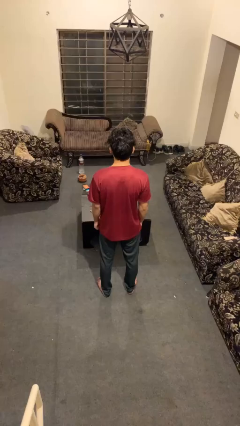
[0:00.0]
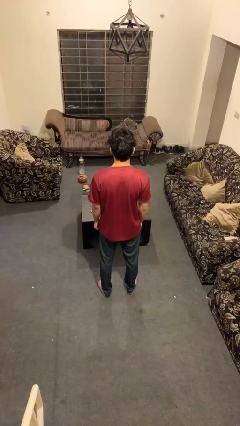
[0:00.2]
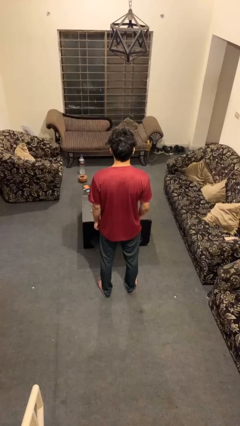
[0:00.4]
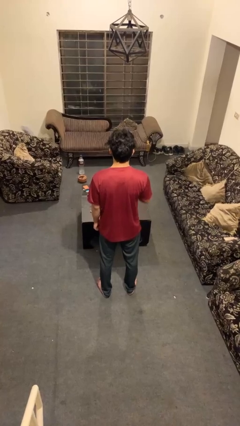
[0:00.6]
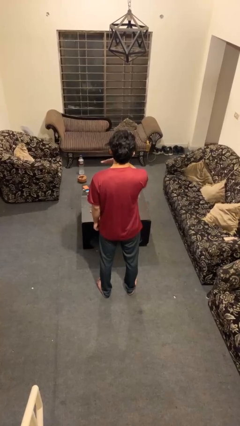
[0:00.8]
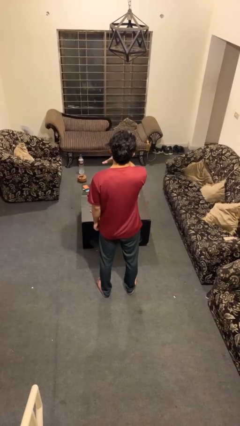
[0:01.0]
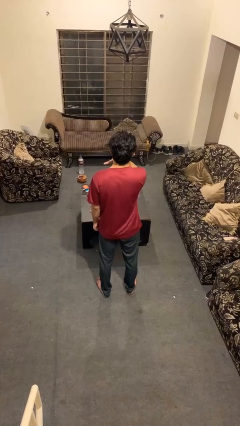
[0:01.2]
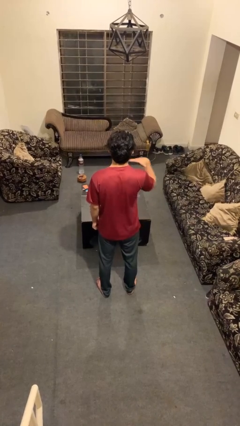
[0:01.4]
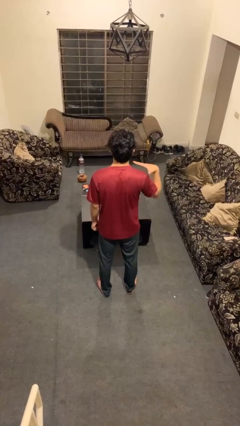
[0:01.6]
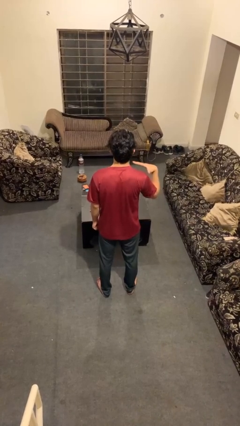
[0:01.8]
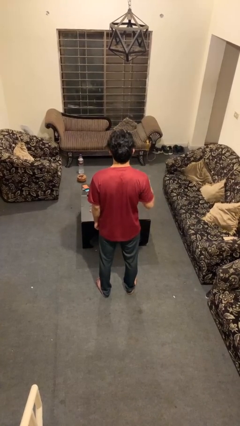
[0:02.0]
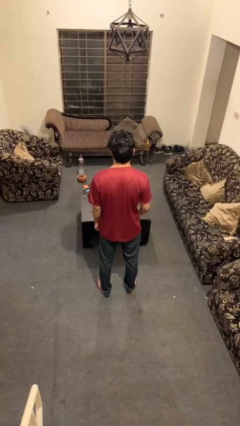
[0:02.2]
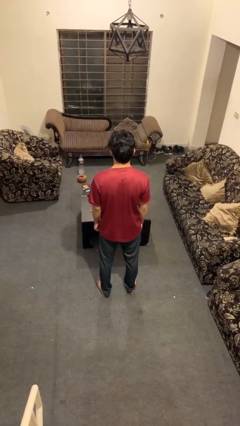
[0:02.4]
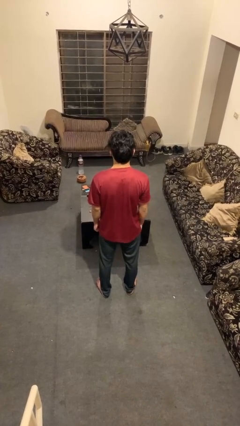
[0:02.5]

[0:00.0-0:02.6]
person gestures cut

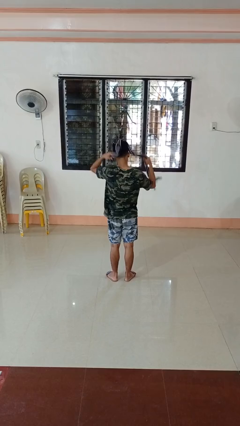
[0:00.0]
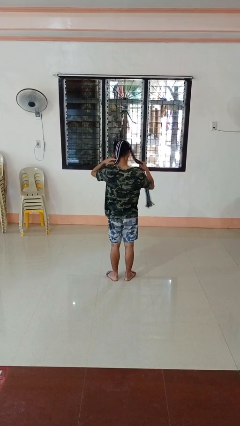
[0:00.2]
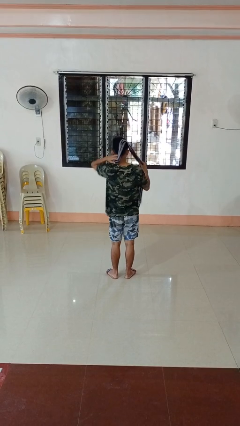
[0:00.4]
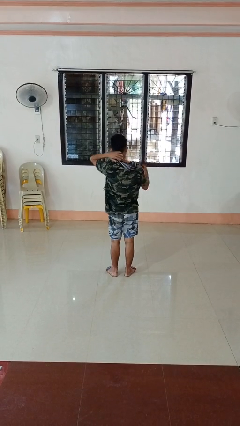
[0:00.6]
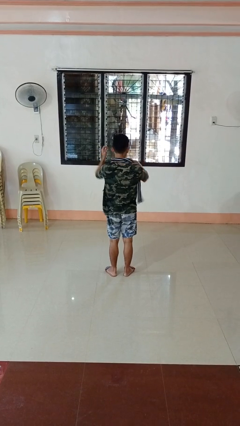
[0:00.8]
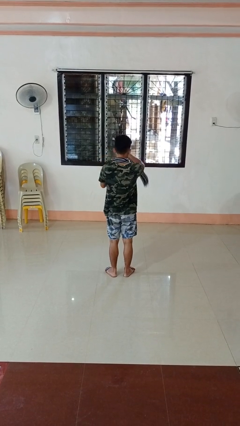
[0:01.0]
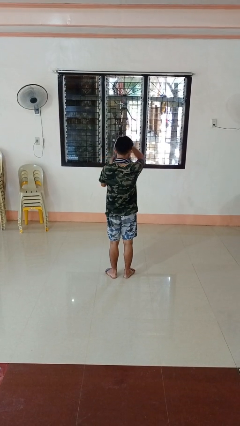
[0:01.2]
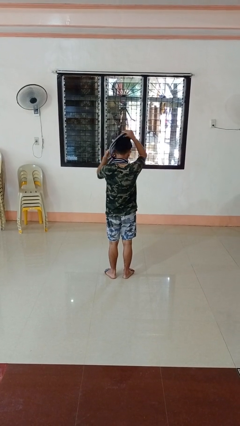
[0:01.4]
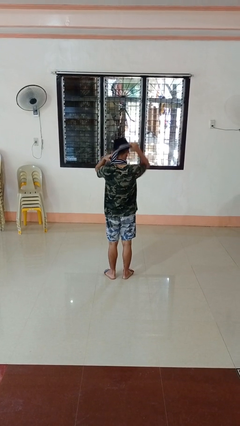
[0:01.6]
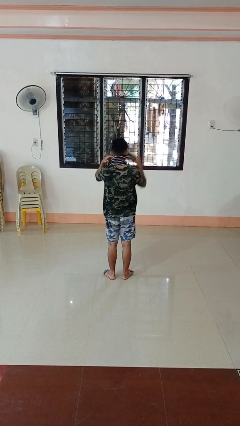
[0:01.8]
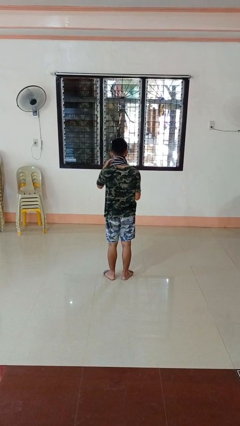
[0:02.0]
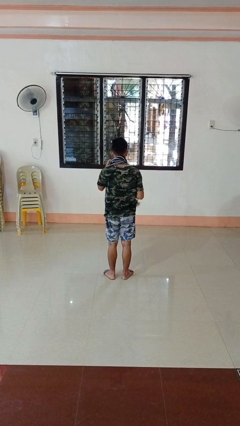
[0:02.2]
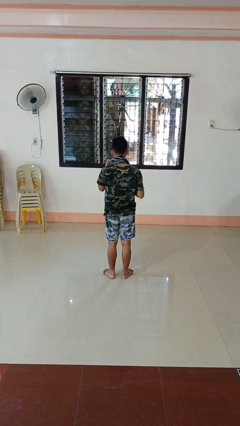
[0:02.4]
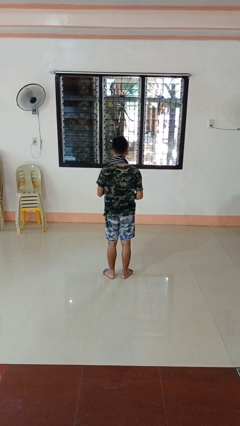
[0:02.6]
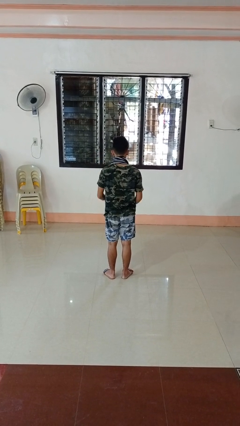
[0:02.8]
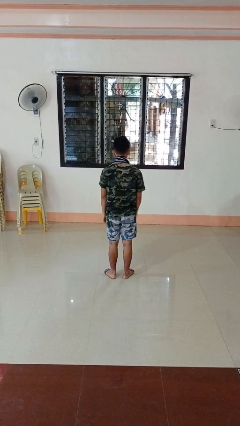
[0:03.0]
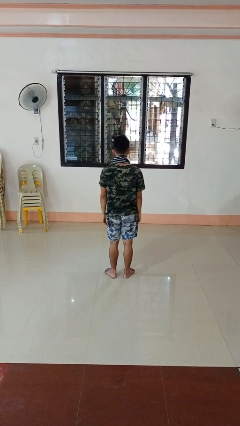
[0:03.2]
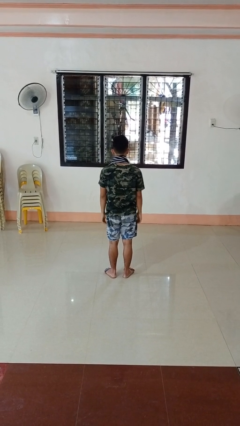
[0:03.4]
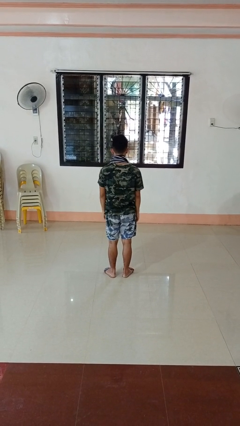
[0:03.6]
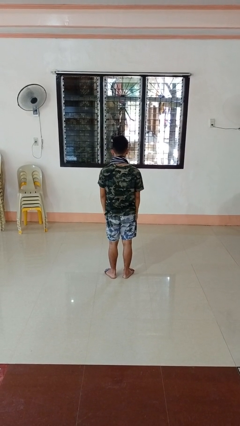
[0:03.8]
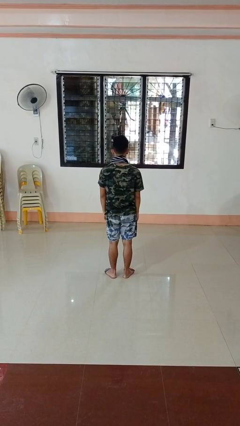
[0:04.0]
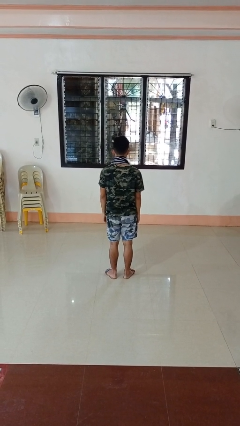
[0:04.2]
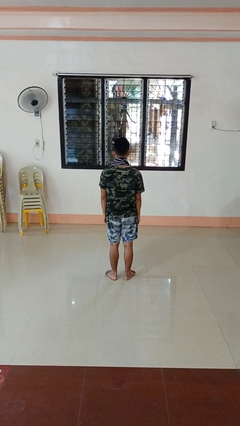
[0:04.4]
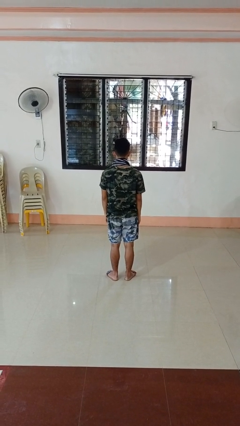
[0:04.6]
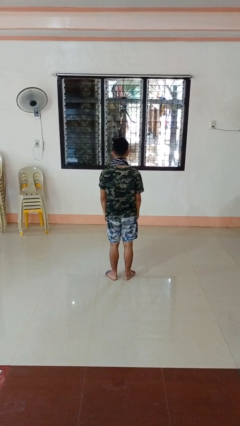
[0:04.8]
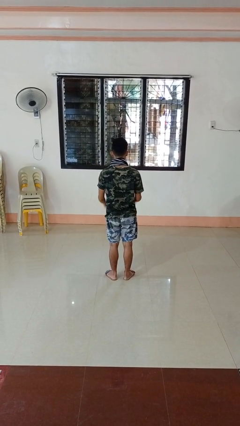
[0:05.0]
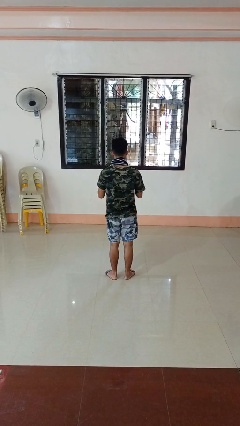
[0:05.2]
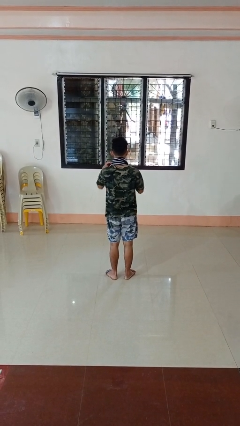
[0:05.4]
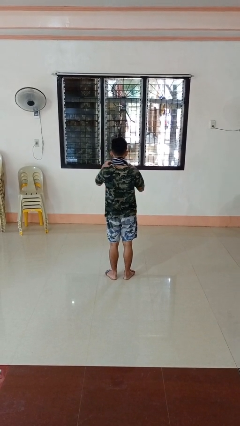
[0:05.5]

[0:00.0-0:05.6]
person puts on scarf

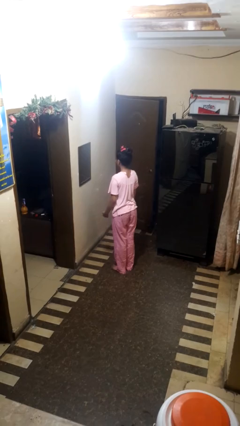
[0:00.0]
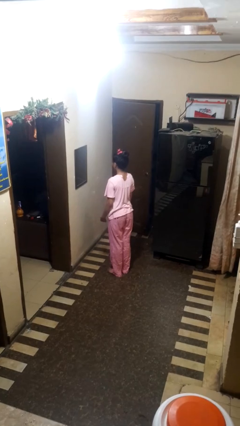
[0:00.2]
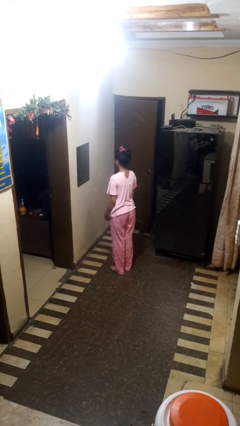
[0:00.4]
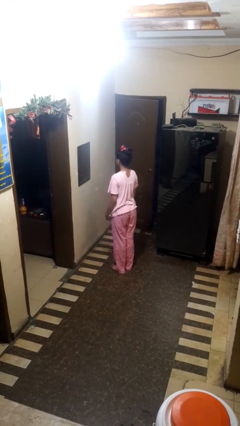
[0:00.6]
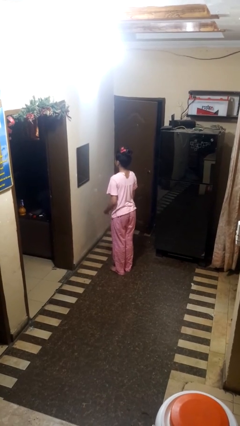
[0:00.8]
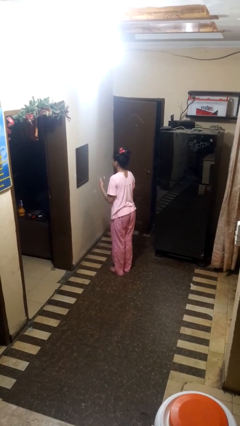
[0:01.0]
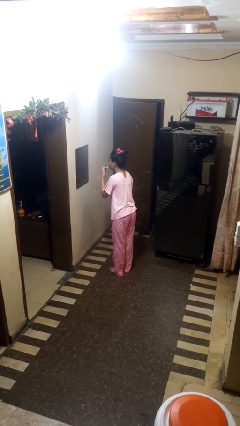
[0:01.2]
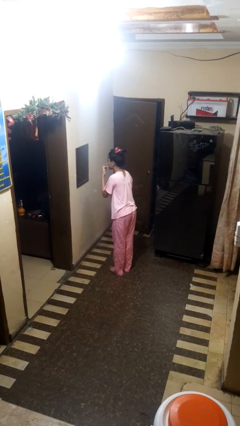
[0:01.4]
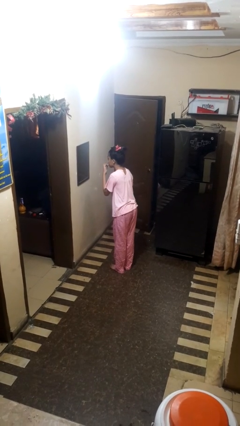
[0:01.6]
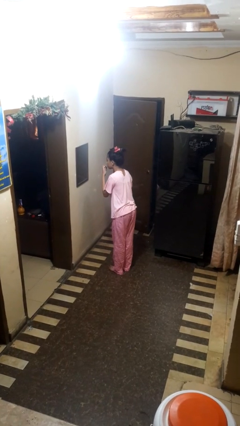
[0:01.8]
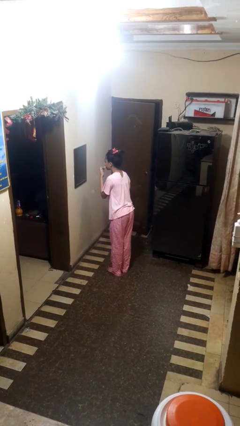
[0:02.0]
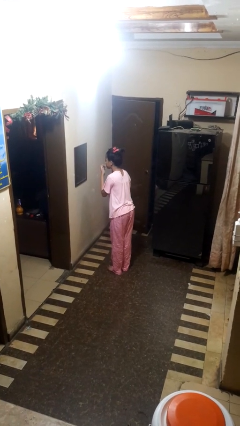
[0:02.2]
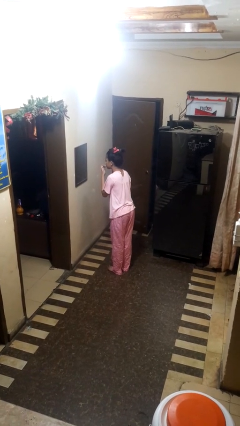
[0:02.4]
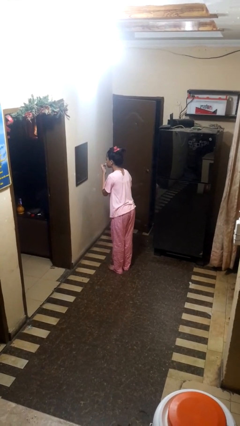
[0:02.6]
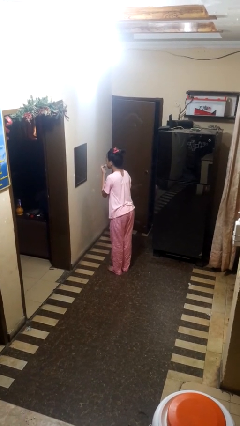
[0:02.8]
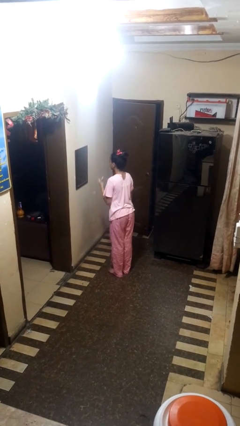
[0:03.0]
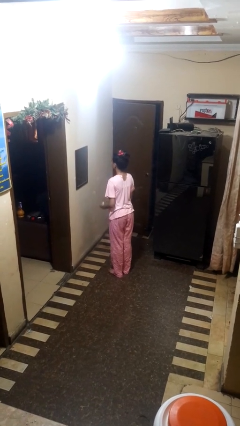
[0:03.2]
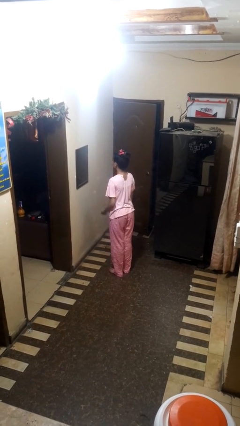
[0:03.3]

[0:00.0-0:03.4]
person applies lip makeup

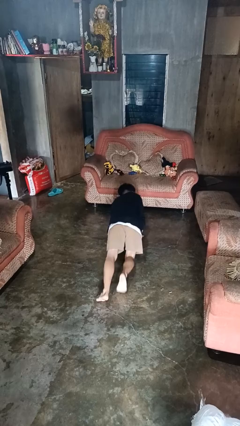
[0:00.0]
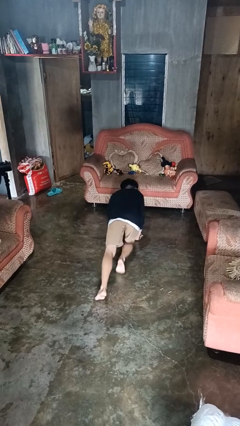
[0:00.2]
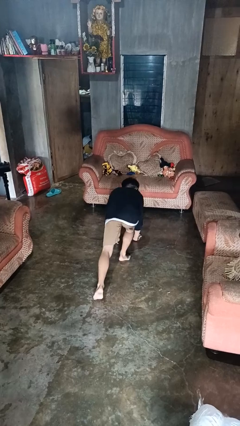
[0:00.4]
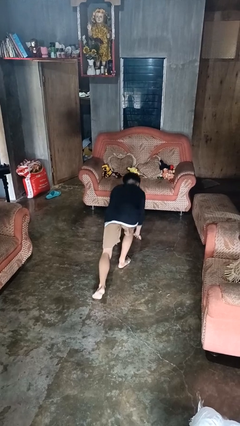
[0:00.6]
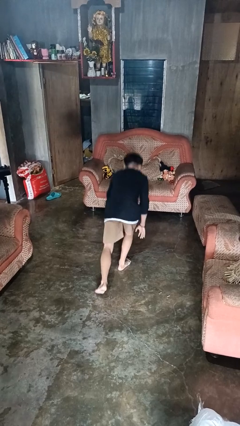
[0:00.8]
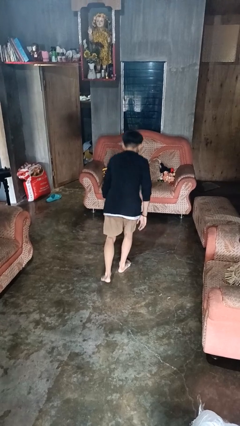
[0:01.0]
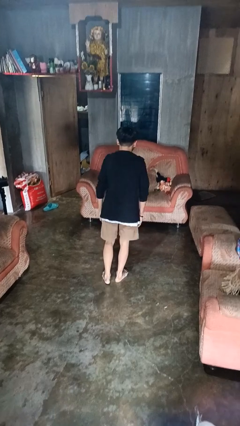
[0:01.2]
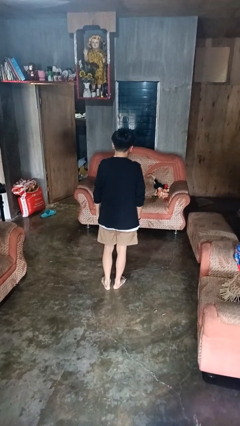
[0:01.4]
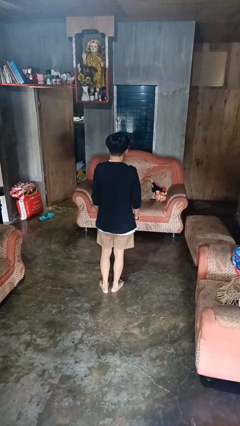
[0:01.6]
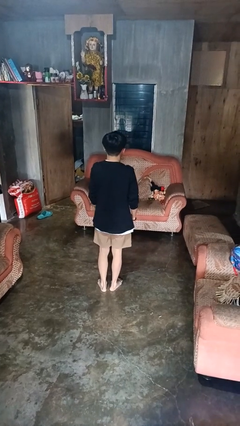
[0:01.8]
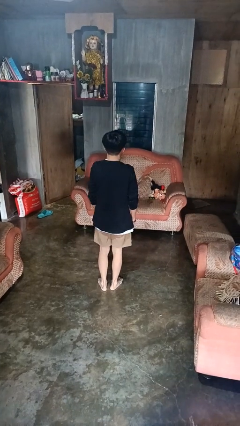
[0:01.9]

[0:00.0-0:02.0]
person stands up from floor

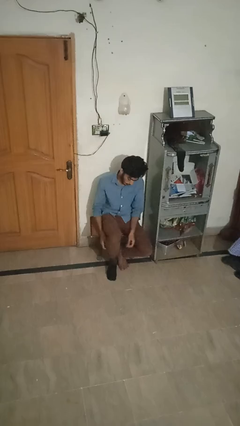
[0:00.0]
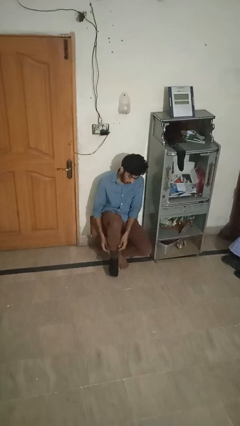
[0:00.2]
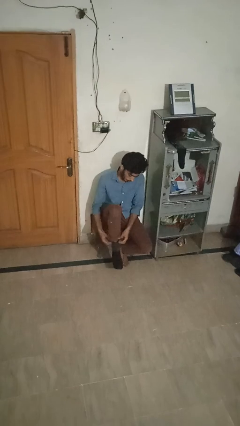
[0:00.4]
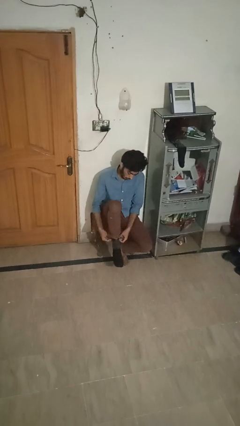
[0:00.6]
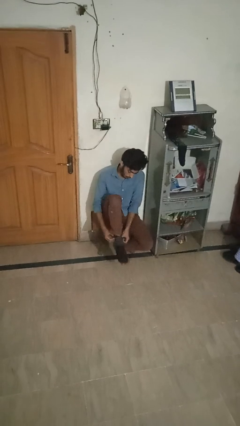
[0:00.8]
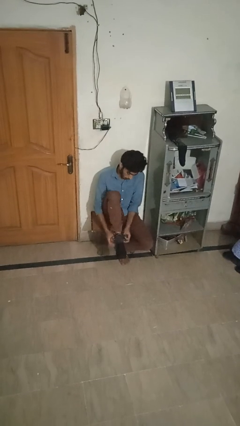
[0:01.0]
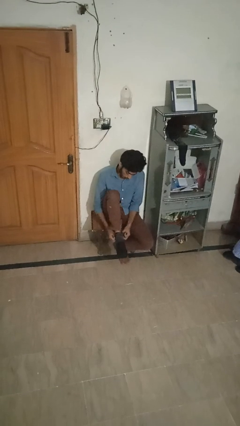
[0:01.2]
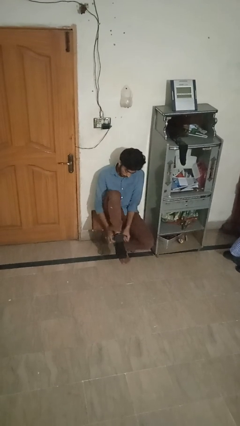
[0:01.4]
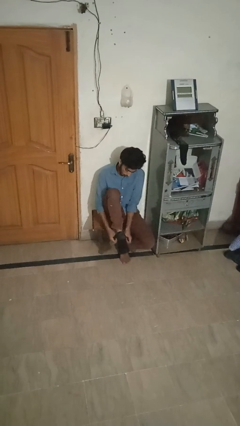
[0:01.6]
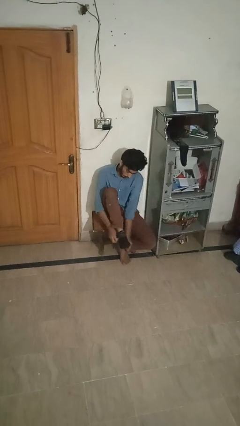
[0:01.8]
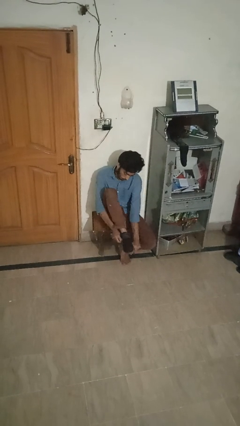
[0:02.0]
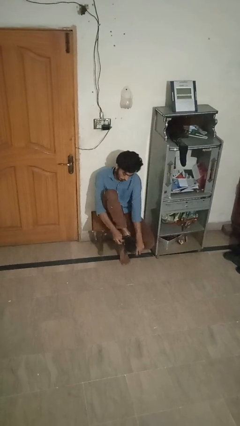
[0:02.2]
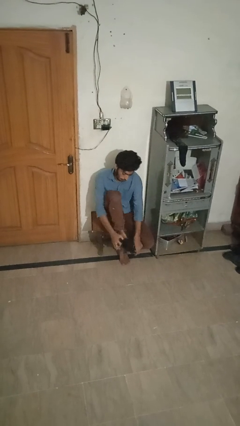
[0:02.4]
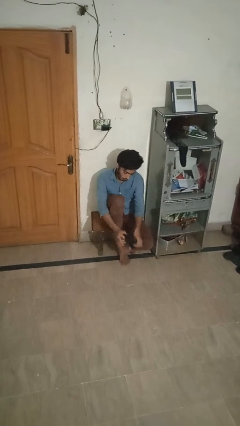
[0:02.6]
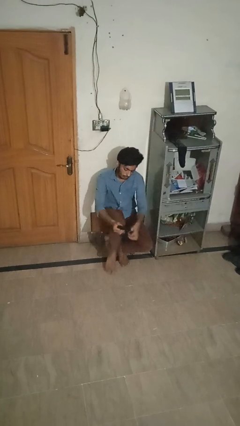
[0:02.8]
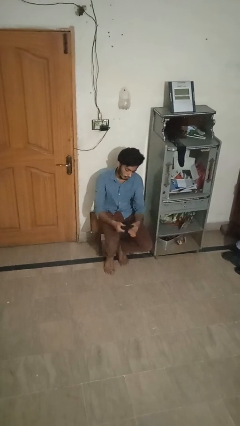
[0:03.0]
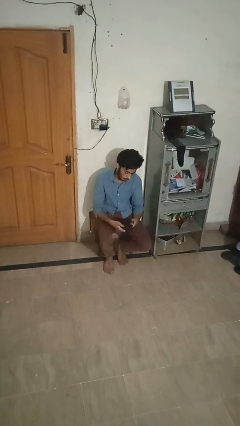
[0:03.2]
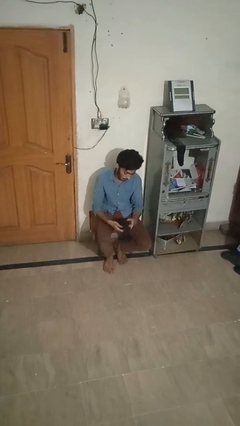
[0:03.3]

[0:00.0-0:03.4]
person takes off socks

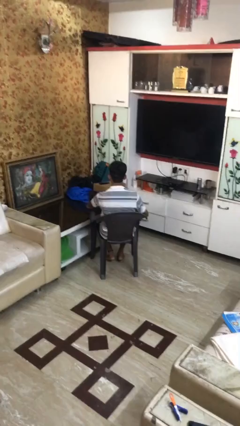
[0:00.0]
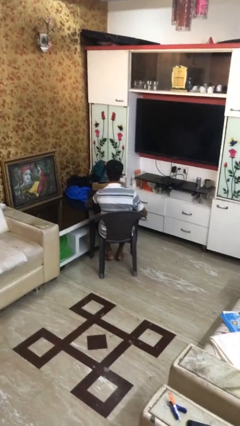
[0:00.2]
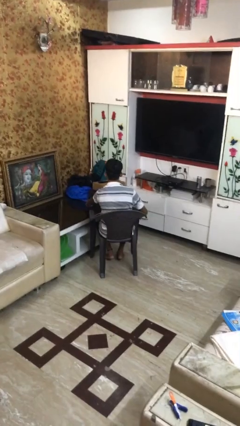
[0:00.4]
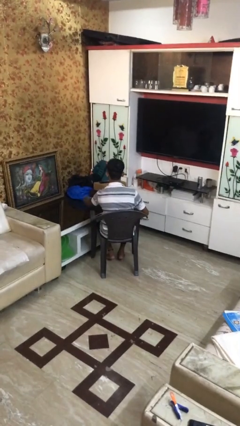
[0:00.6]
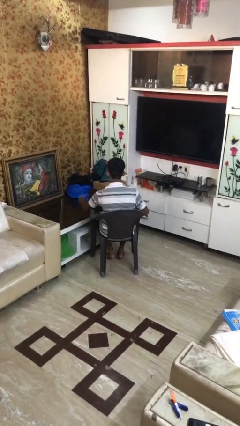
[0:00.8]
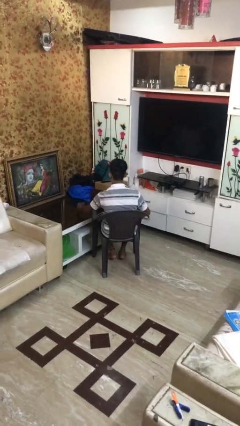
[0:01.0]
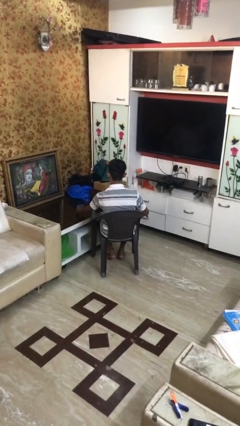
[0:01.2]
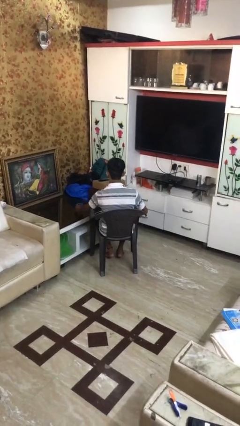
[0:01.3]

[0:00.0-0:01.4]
person sets upright glass
